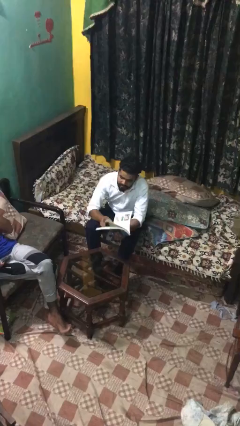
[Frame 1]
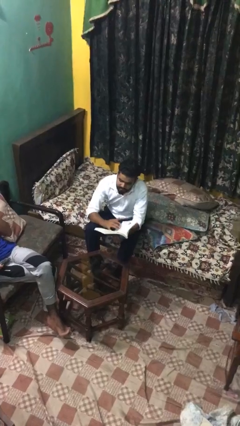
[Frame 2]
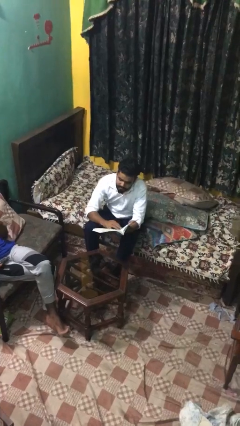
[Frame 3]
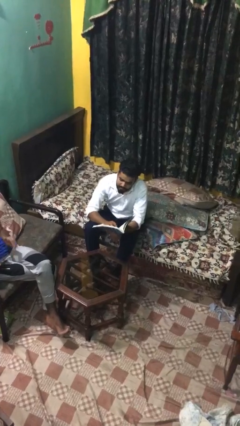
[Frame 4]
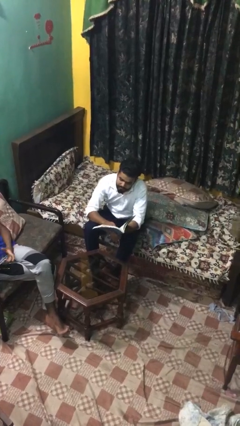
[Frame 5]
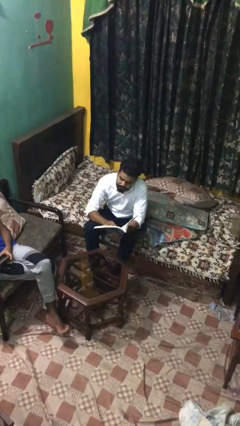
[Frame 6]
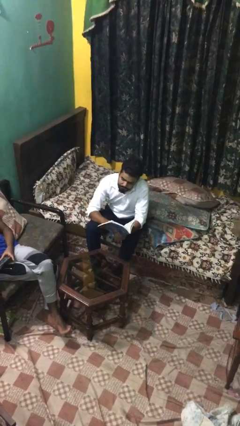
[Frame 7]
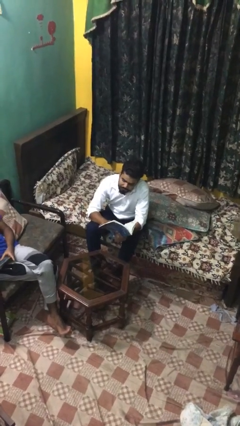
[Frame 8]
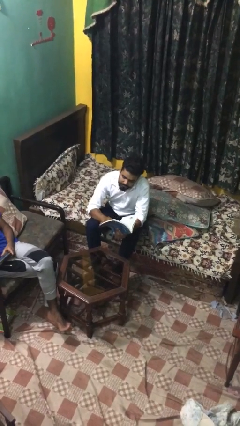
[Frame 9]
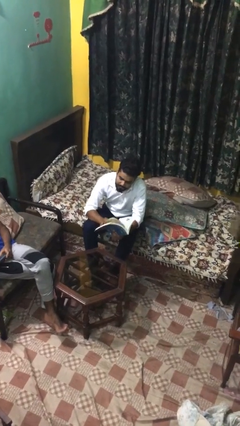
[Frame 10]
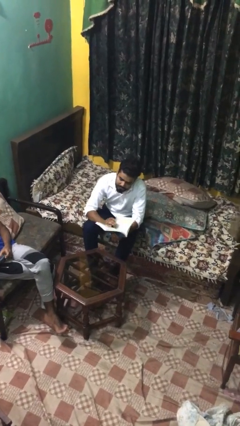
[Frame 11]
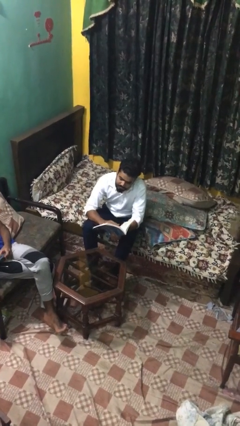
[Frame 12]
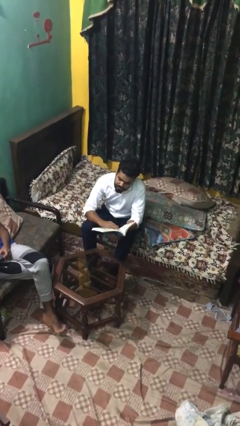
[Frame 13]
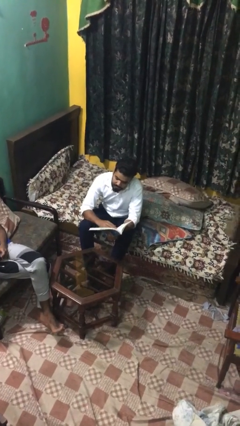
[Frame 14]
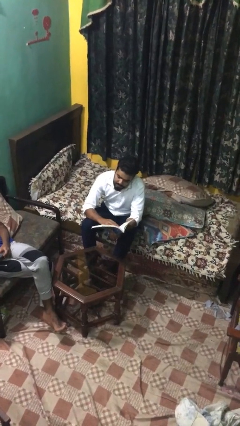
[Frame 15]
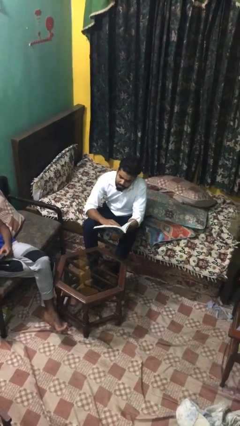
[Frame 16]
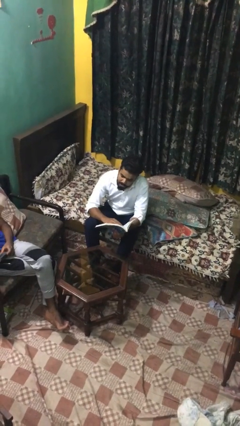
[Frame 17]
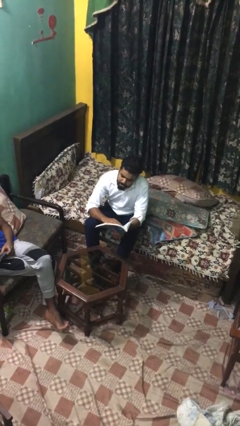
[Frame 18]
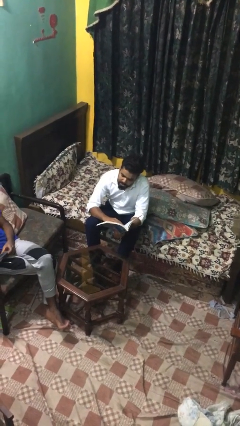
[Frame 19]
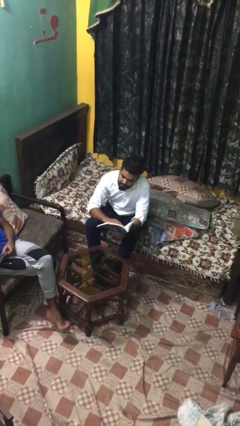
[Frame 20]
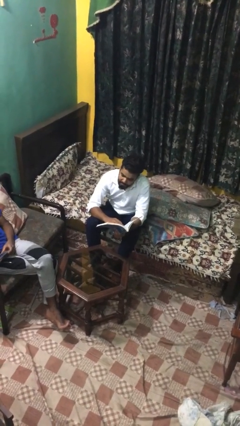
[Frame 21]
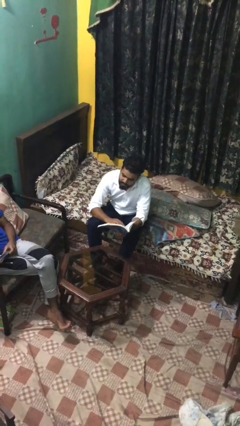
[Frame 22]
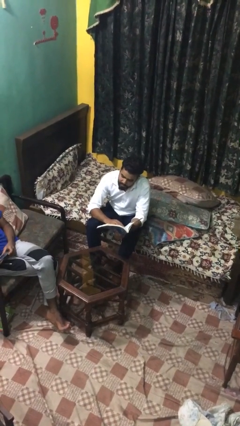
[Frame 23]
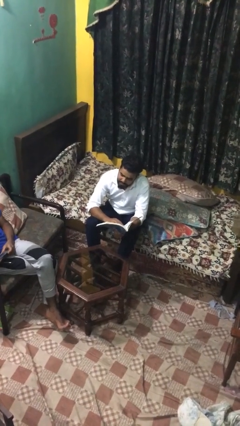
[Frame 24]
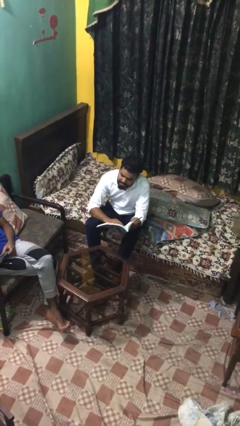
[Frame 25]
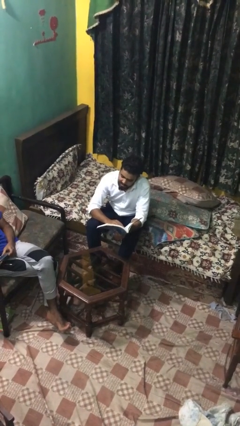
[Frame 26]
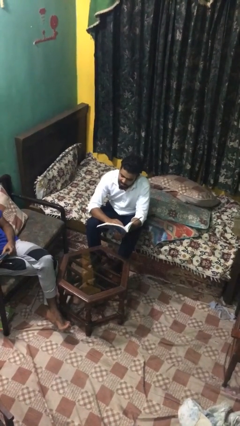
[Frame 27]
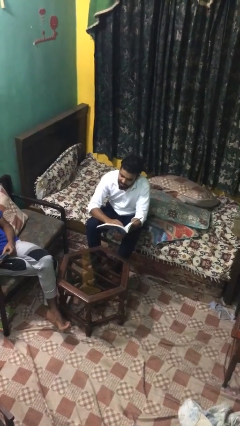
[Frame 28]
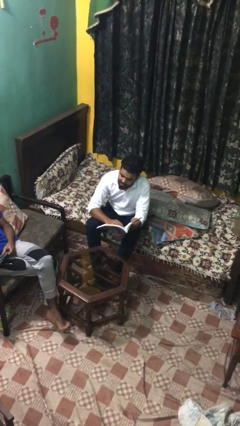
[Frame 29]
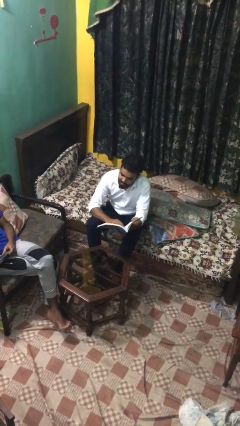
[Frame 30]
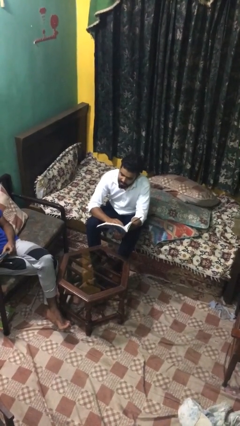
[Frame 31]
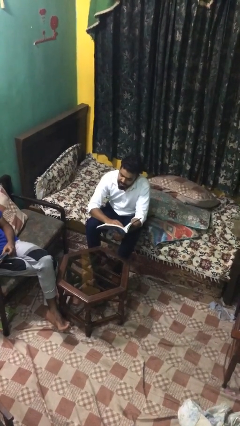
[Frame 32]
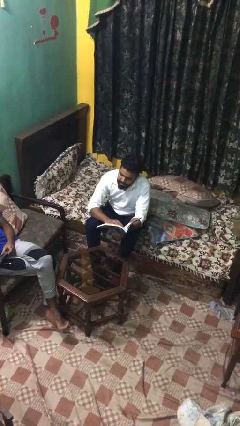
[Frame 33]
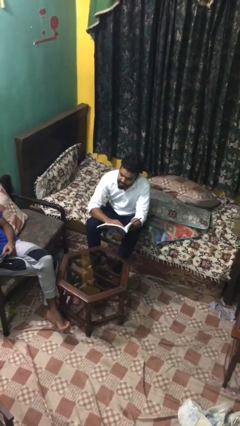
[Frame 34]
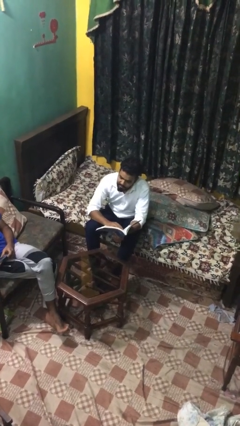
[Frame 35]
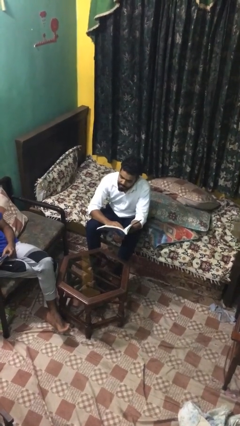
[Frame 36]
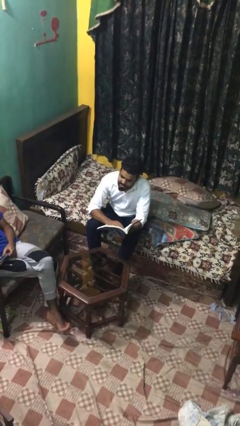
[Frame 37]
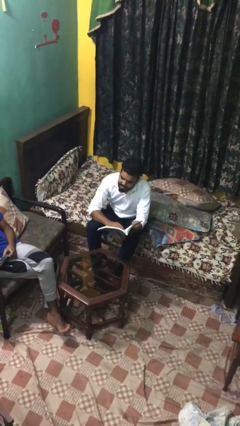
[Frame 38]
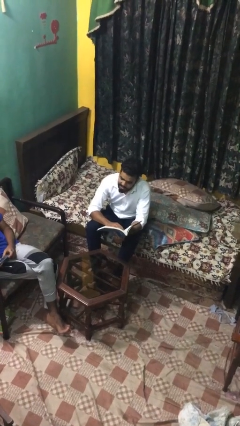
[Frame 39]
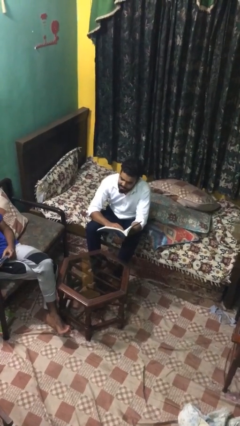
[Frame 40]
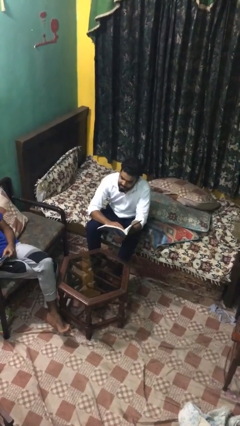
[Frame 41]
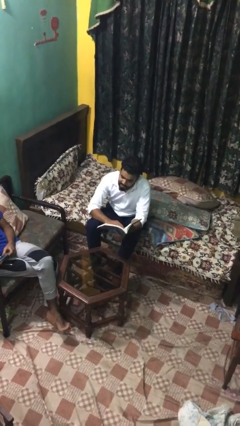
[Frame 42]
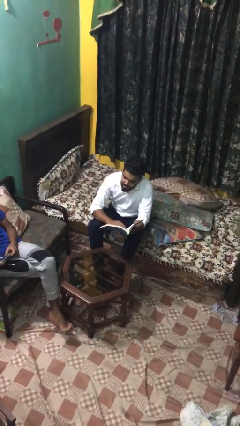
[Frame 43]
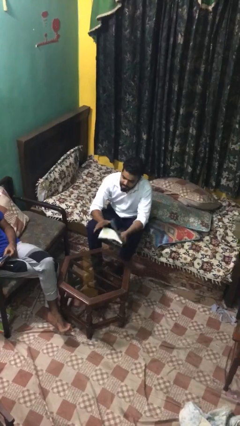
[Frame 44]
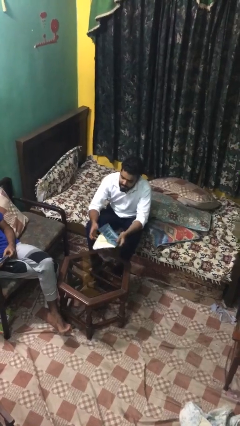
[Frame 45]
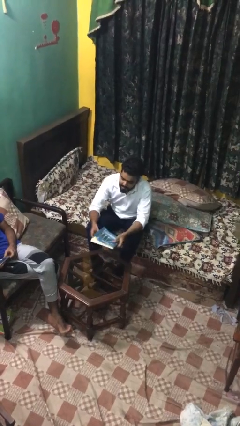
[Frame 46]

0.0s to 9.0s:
person reads document

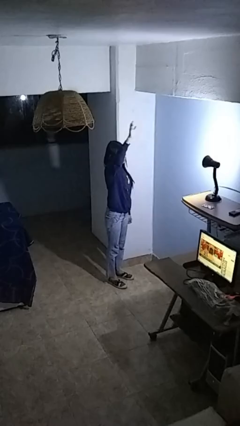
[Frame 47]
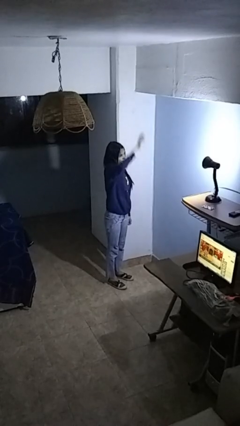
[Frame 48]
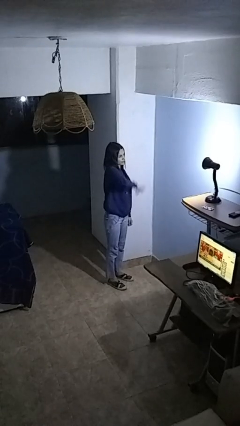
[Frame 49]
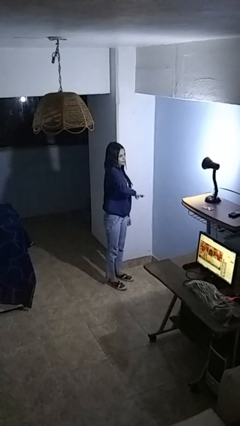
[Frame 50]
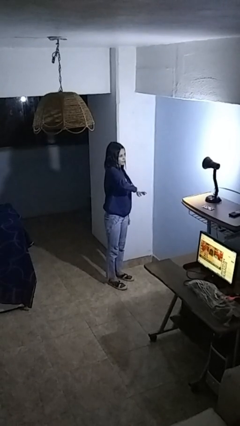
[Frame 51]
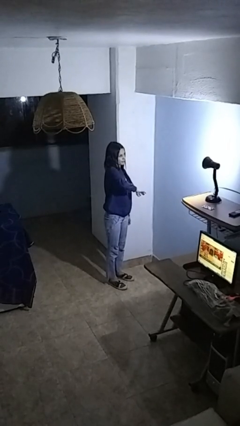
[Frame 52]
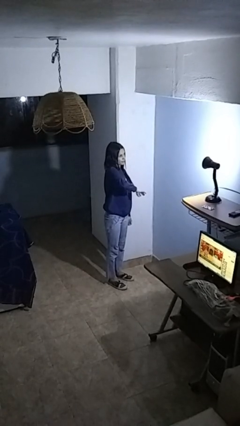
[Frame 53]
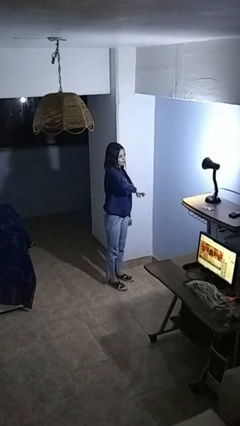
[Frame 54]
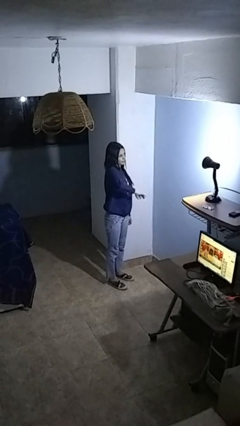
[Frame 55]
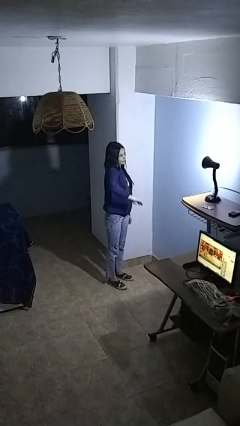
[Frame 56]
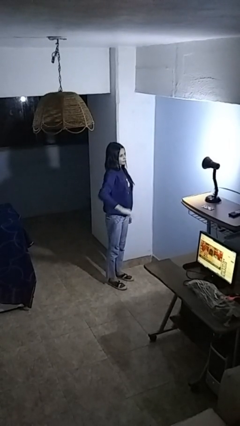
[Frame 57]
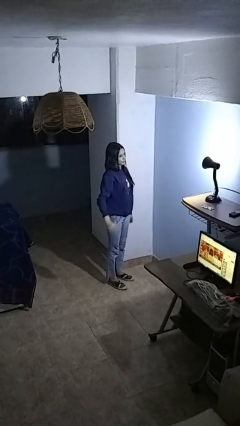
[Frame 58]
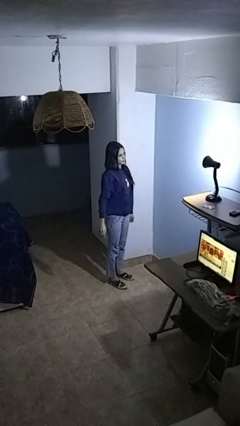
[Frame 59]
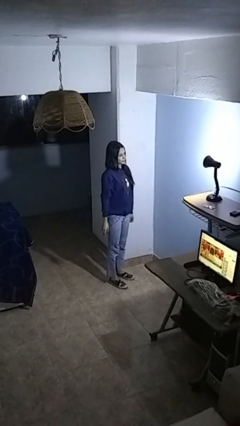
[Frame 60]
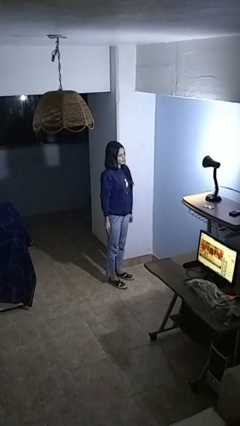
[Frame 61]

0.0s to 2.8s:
person gestures swipe down

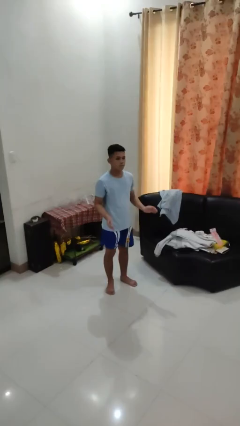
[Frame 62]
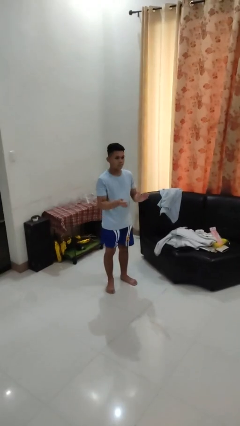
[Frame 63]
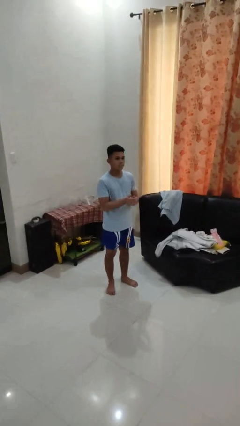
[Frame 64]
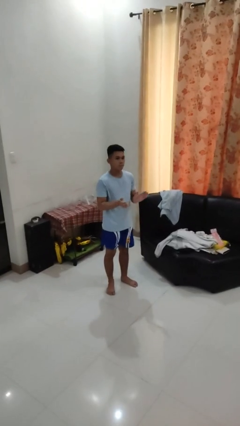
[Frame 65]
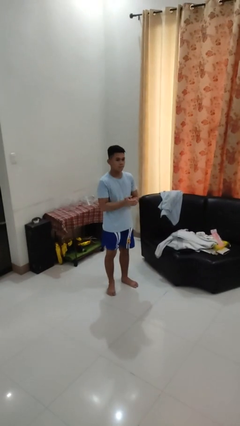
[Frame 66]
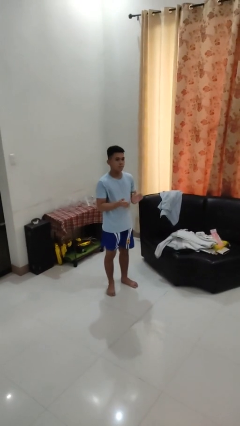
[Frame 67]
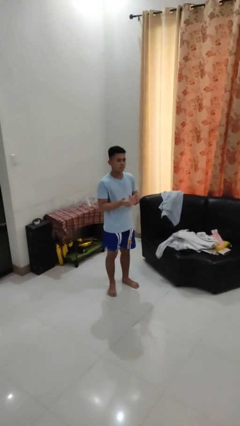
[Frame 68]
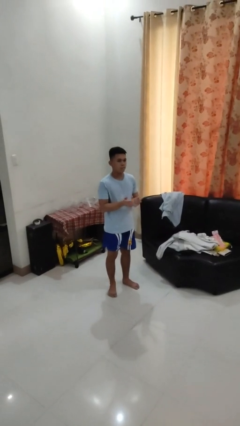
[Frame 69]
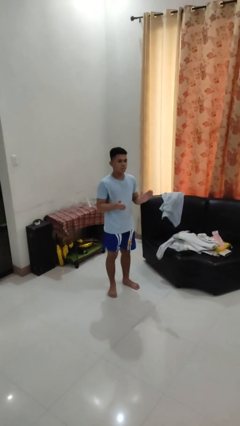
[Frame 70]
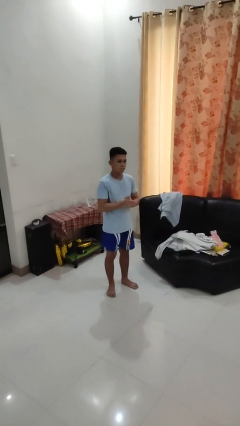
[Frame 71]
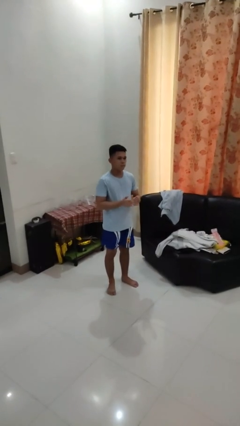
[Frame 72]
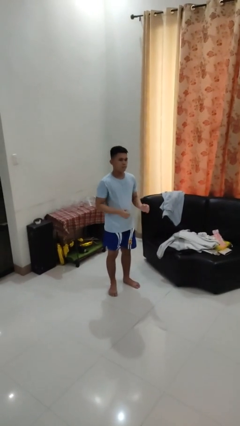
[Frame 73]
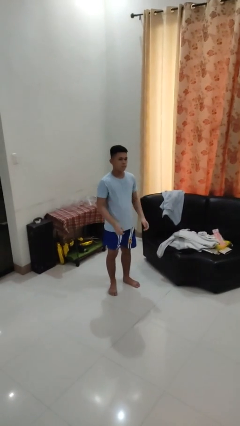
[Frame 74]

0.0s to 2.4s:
person claps hands

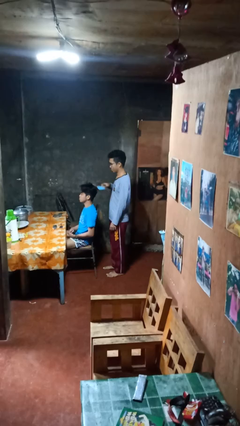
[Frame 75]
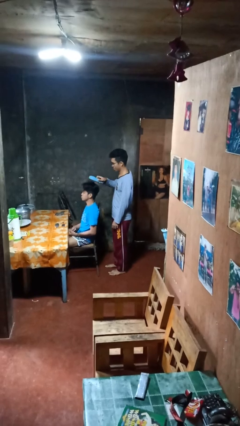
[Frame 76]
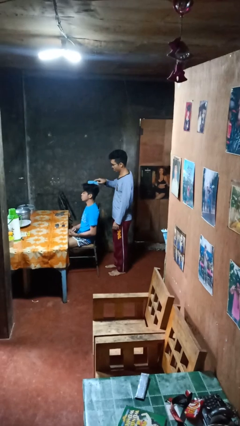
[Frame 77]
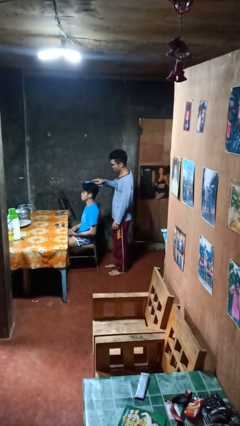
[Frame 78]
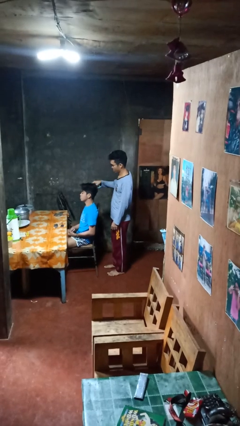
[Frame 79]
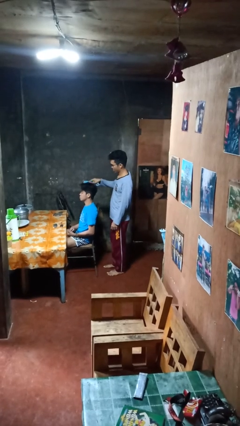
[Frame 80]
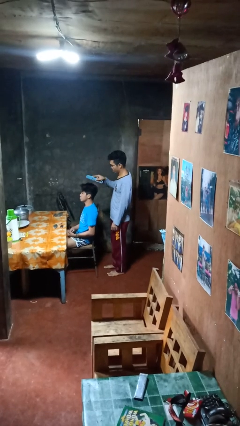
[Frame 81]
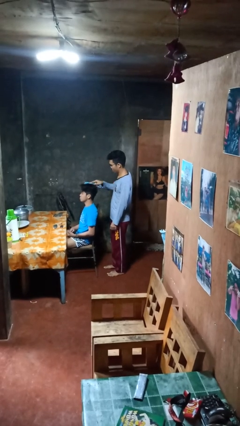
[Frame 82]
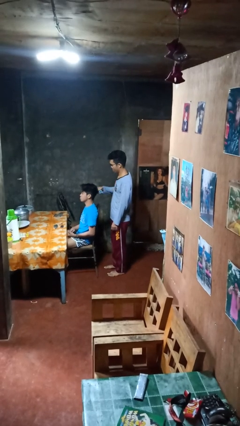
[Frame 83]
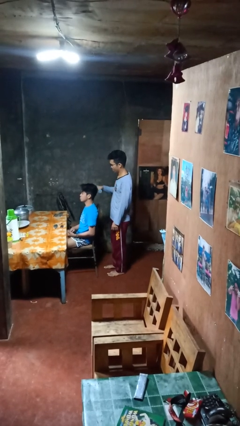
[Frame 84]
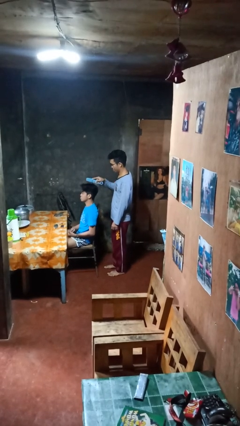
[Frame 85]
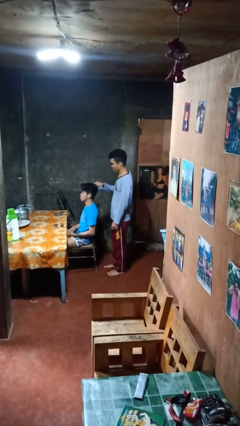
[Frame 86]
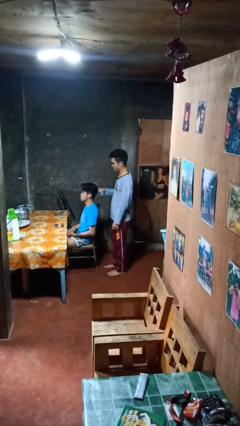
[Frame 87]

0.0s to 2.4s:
person brushes hair of person

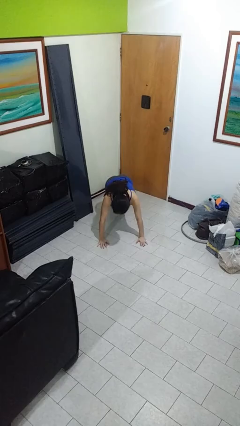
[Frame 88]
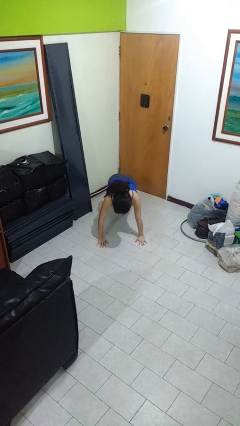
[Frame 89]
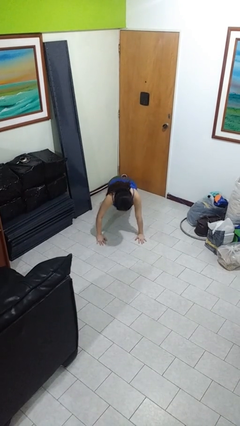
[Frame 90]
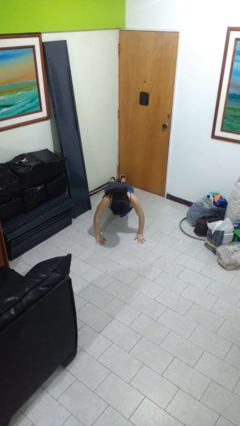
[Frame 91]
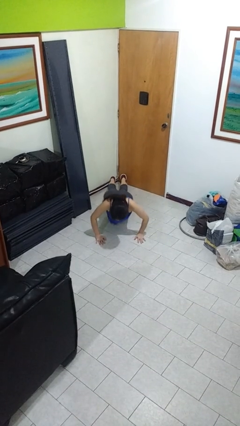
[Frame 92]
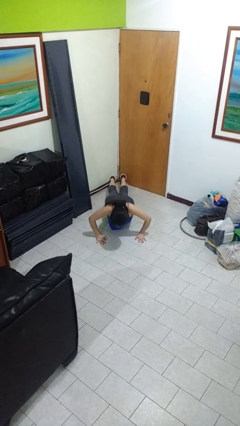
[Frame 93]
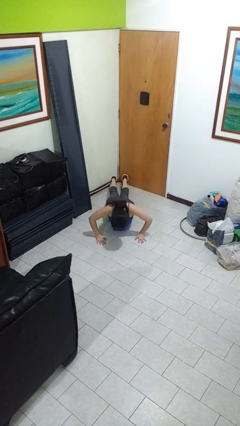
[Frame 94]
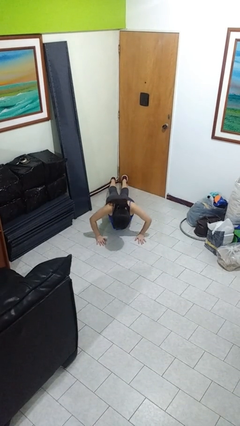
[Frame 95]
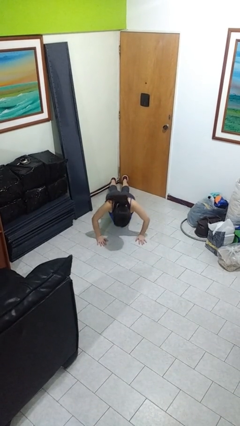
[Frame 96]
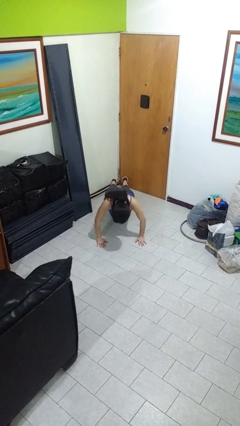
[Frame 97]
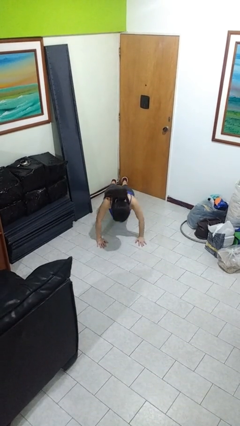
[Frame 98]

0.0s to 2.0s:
person exercises with pushup
